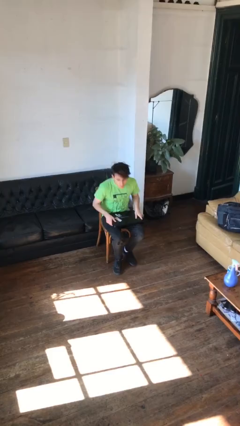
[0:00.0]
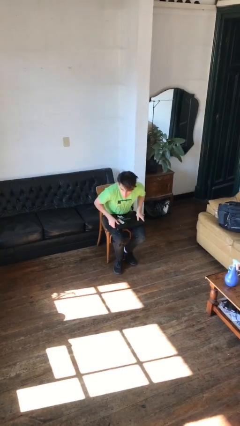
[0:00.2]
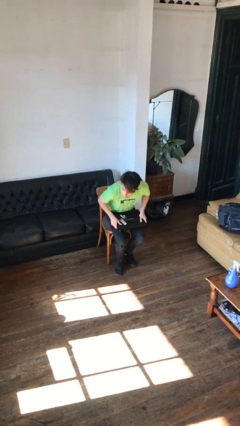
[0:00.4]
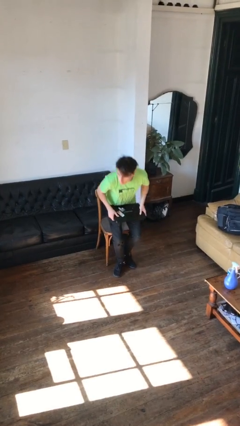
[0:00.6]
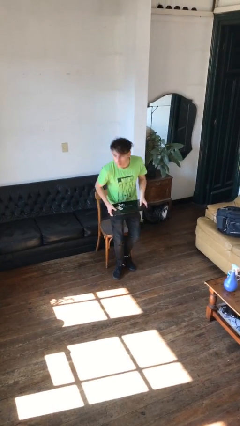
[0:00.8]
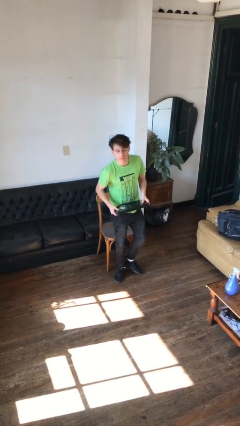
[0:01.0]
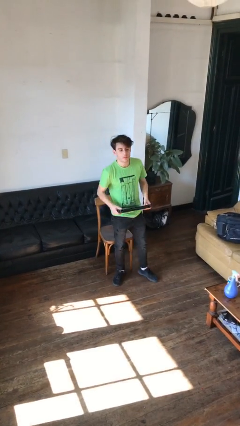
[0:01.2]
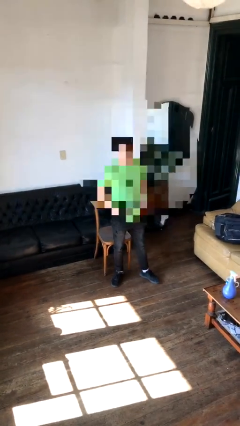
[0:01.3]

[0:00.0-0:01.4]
person stands up

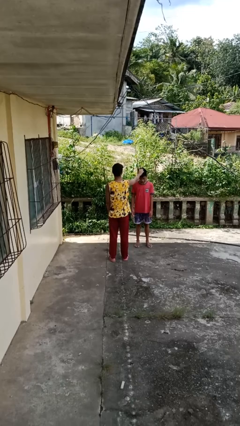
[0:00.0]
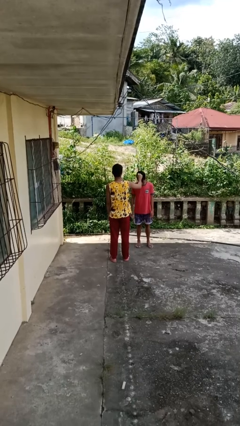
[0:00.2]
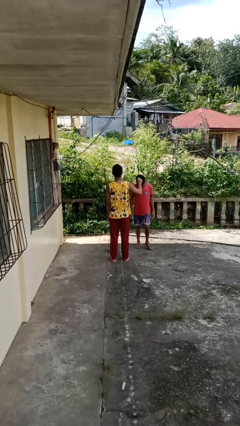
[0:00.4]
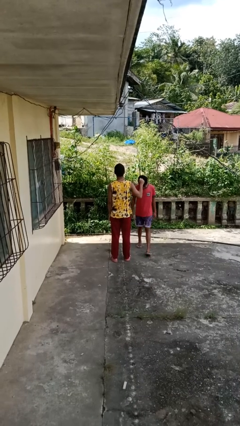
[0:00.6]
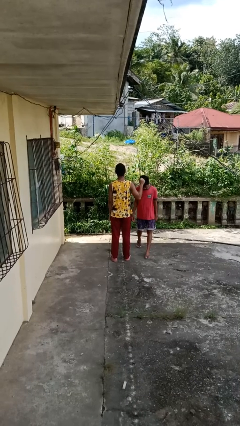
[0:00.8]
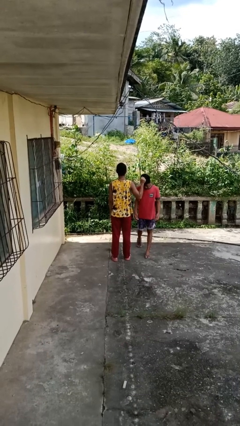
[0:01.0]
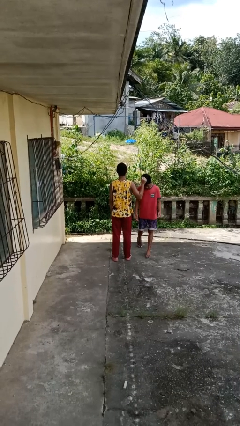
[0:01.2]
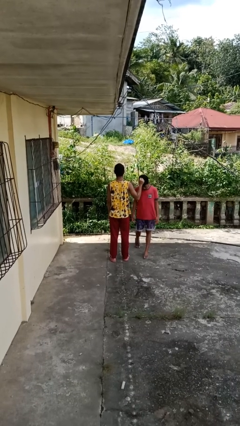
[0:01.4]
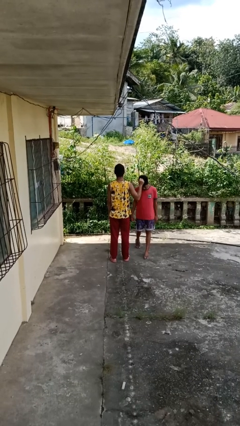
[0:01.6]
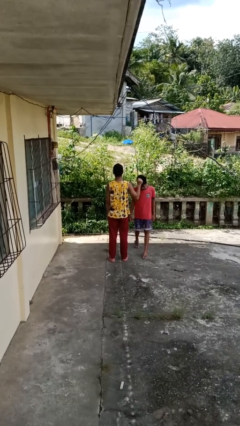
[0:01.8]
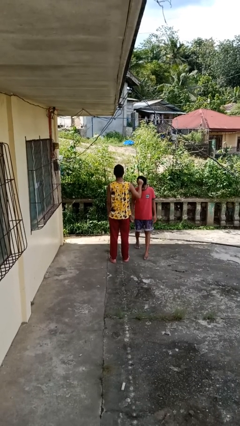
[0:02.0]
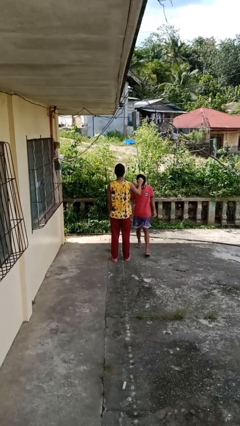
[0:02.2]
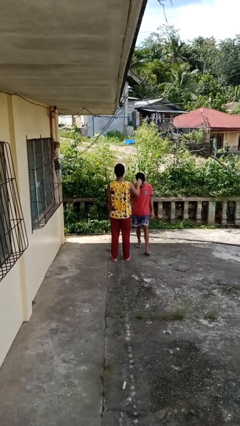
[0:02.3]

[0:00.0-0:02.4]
person grabs person by hair

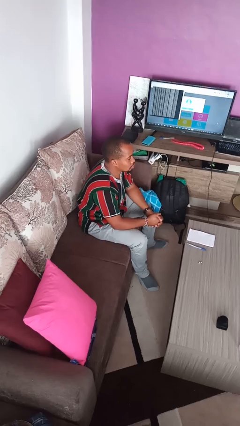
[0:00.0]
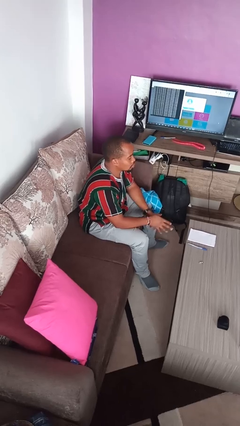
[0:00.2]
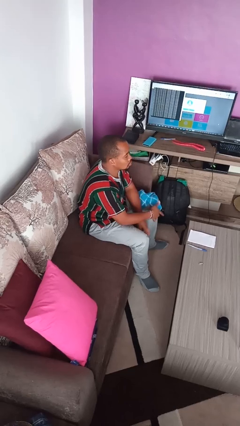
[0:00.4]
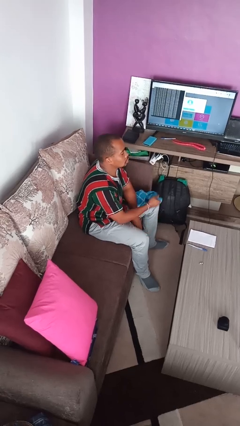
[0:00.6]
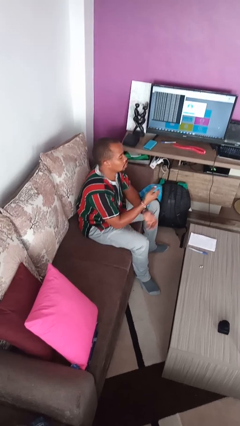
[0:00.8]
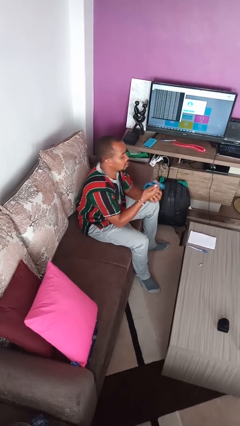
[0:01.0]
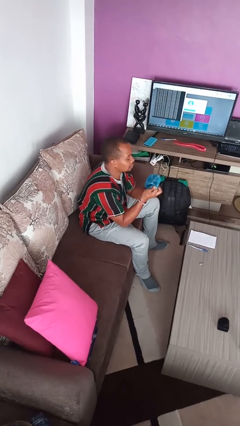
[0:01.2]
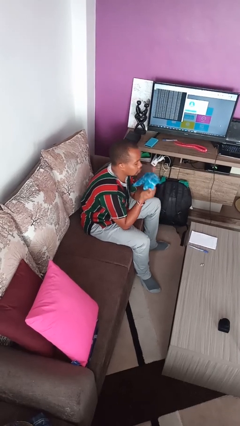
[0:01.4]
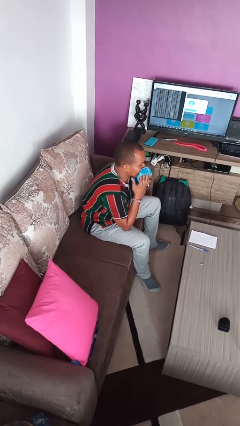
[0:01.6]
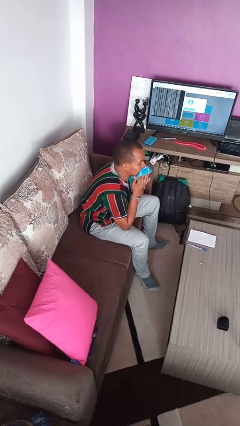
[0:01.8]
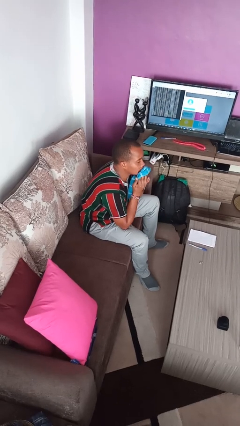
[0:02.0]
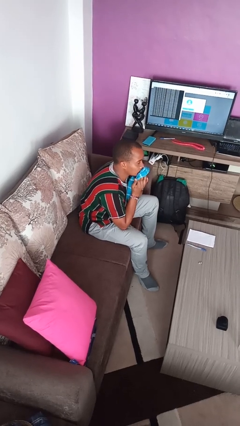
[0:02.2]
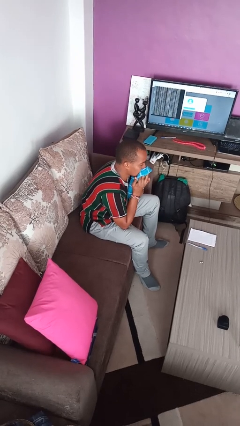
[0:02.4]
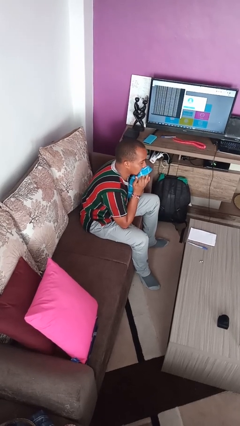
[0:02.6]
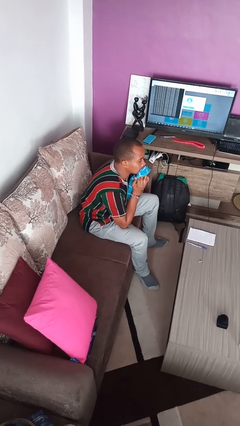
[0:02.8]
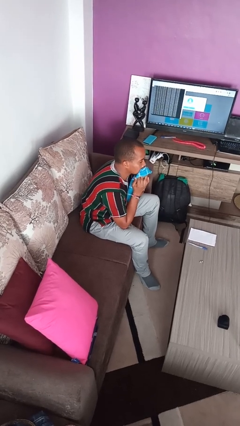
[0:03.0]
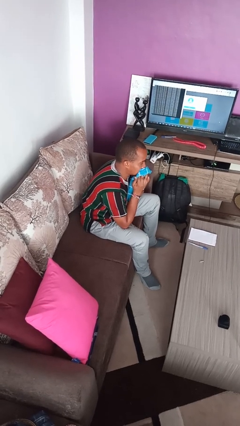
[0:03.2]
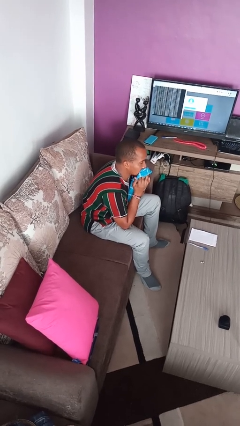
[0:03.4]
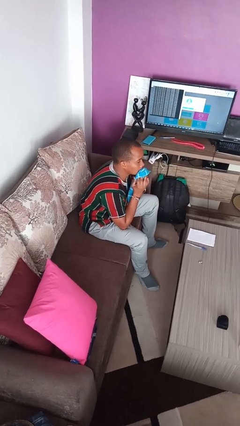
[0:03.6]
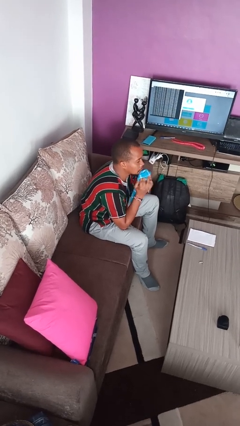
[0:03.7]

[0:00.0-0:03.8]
person wipes mouth with napkin

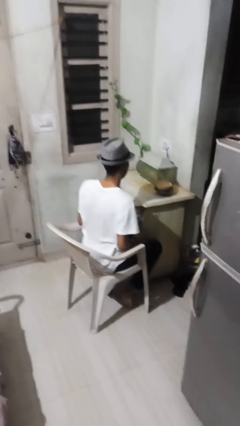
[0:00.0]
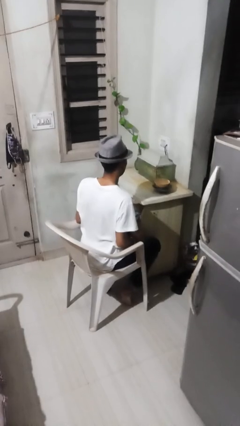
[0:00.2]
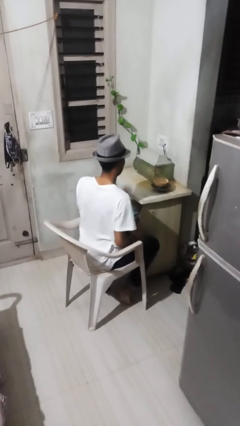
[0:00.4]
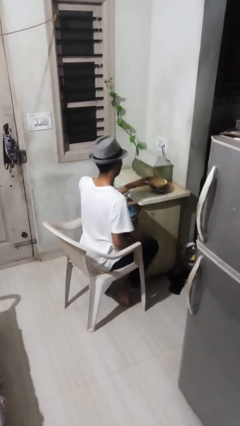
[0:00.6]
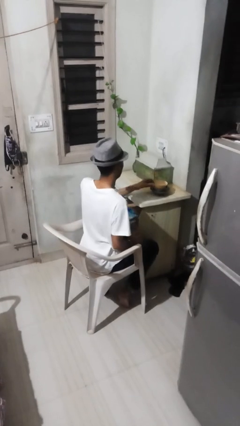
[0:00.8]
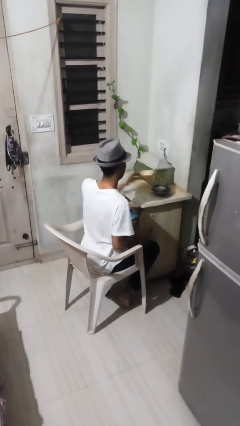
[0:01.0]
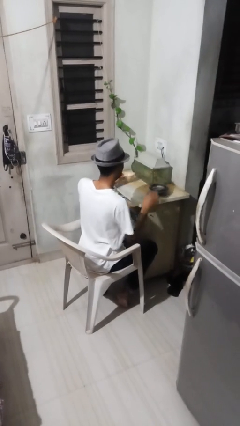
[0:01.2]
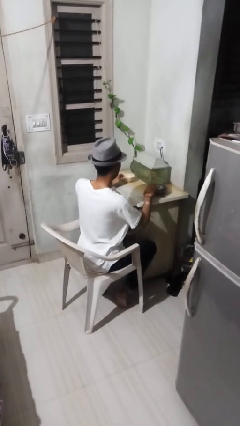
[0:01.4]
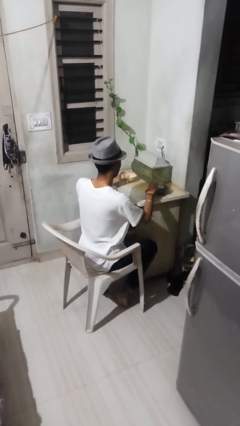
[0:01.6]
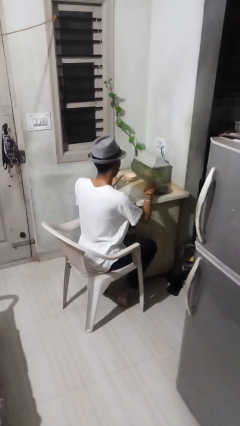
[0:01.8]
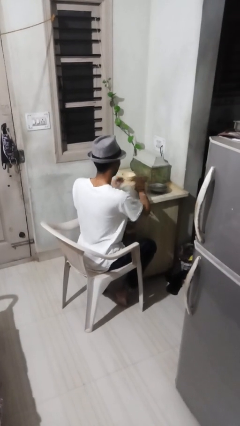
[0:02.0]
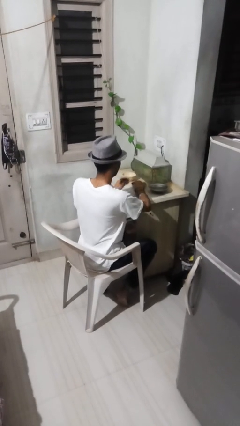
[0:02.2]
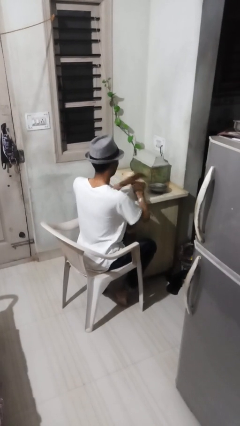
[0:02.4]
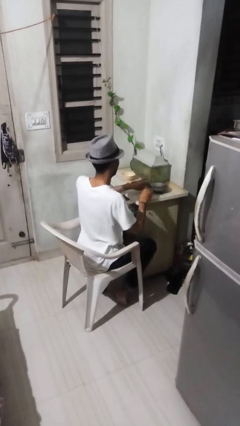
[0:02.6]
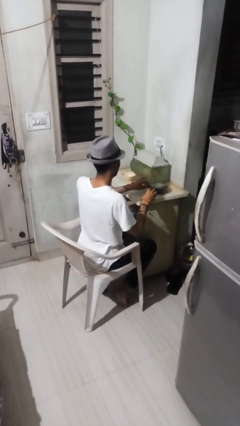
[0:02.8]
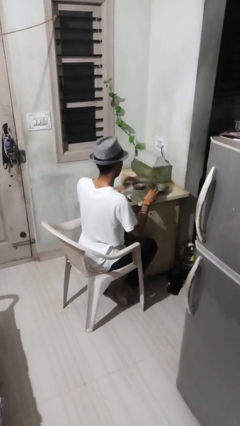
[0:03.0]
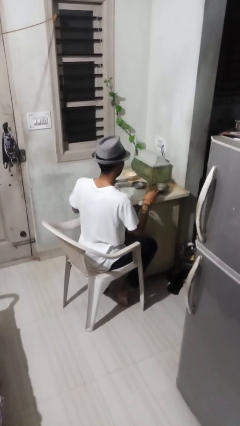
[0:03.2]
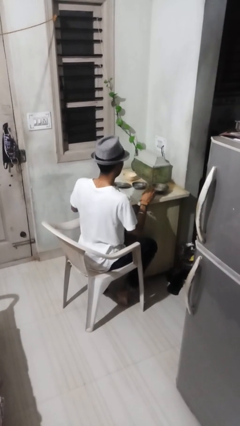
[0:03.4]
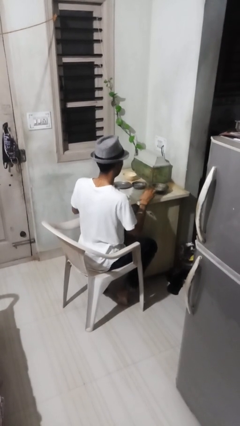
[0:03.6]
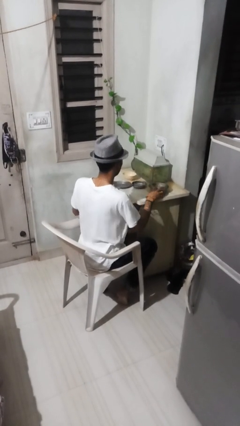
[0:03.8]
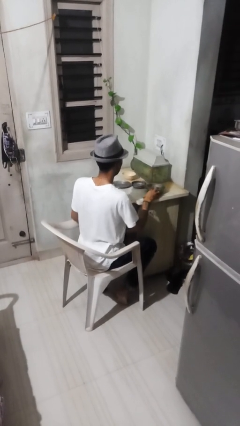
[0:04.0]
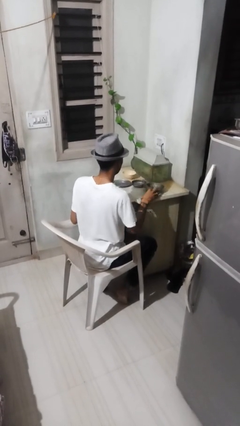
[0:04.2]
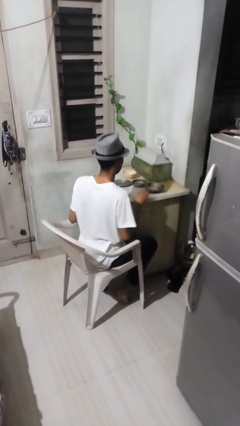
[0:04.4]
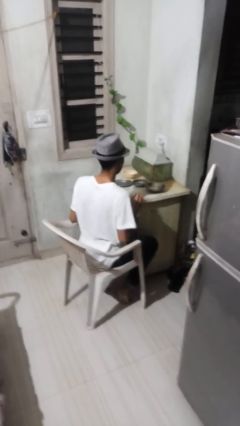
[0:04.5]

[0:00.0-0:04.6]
person sets table

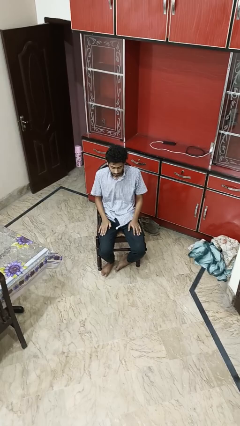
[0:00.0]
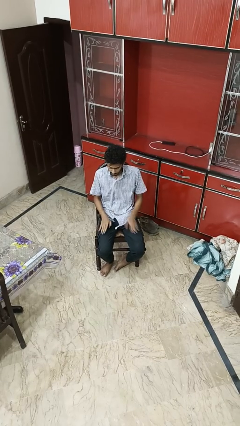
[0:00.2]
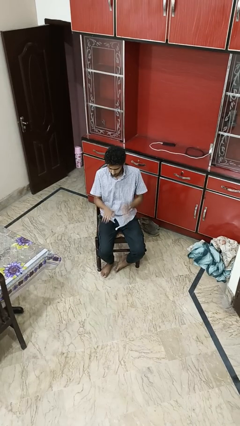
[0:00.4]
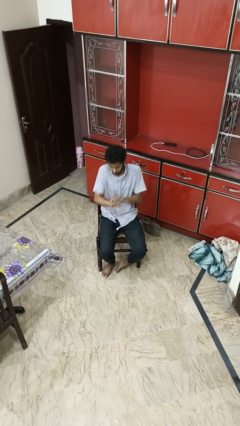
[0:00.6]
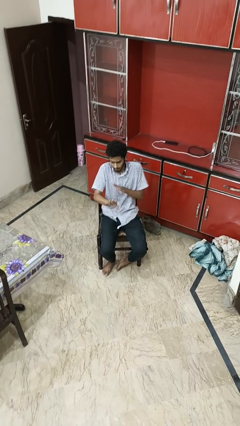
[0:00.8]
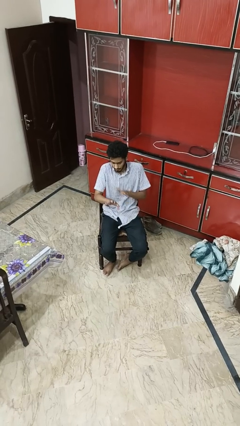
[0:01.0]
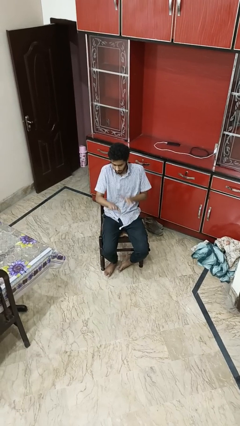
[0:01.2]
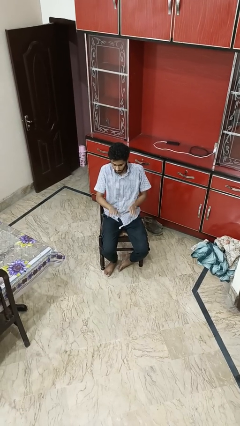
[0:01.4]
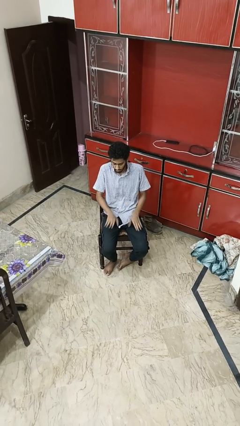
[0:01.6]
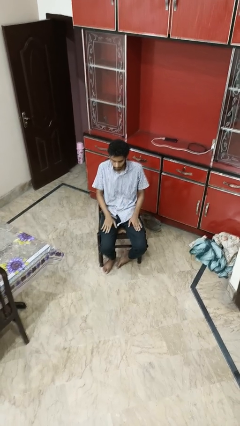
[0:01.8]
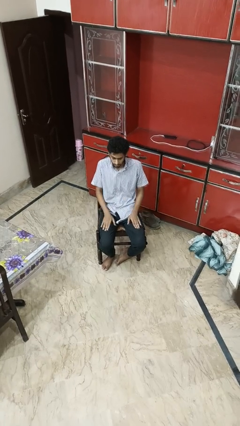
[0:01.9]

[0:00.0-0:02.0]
person swats bug

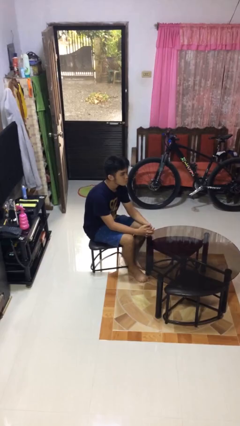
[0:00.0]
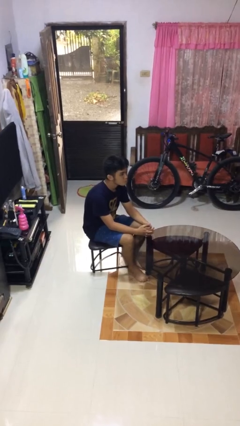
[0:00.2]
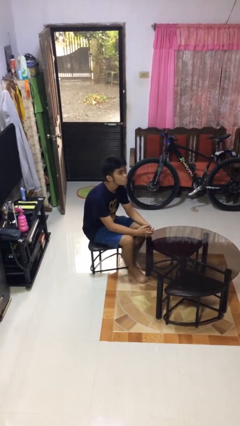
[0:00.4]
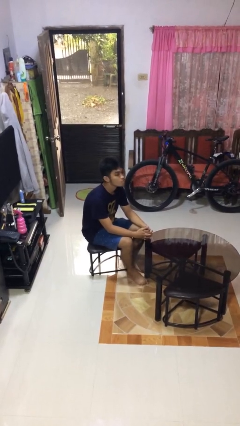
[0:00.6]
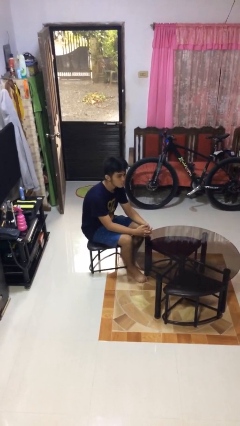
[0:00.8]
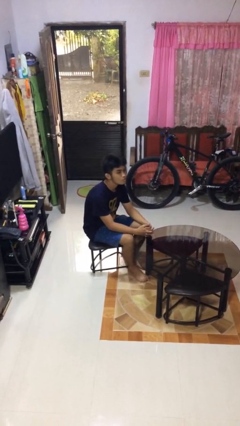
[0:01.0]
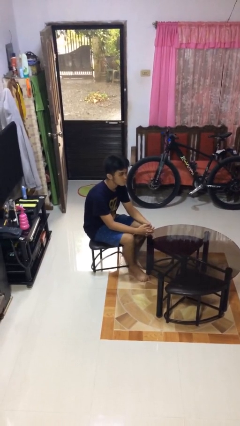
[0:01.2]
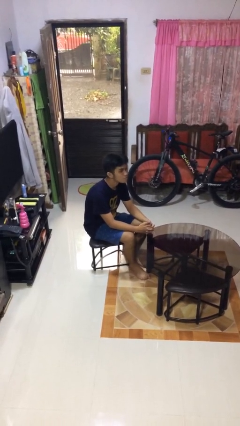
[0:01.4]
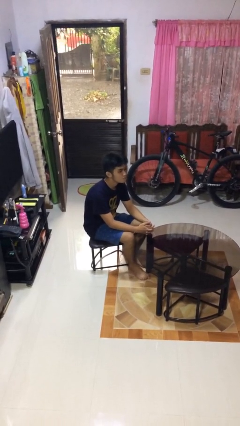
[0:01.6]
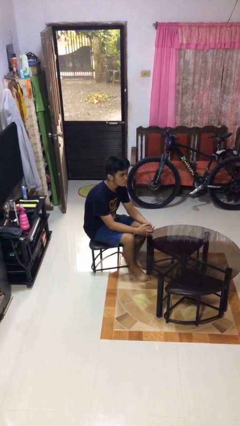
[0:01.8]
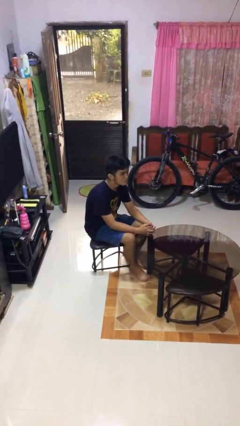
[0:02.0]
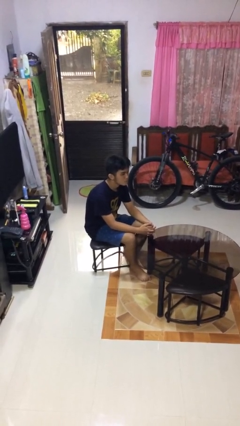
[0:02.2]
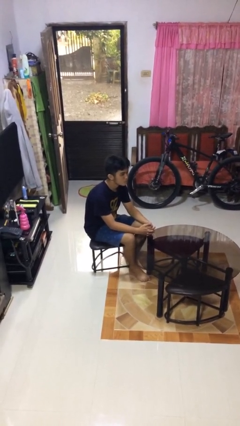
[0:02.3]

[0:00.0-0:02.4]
person nods head

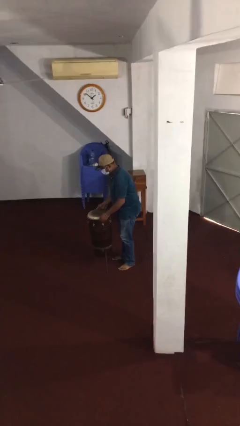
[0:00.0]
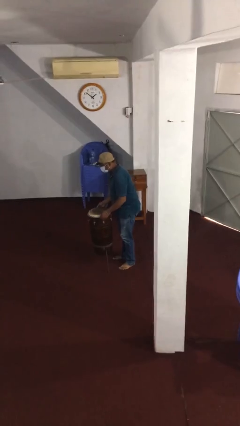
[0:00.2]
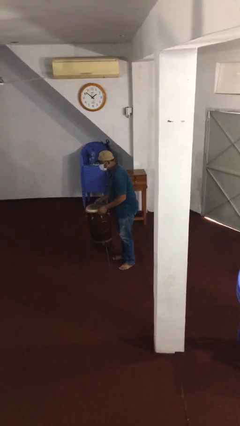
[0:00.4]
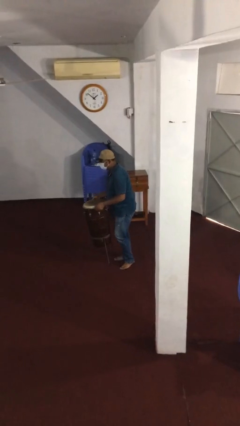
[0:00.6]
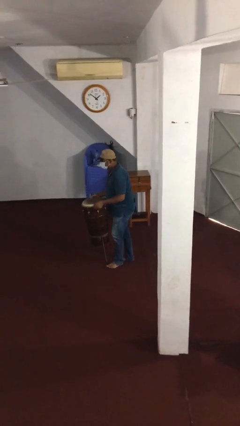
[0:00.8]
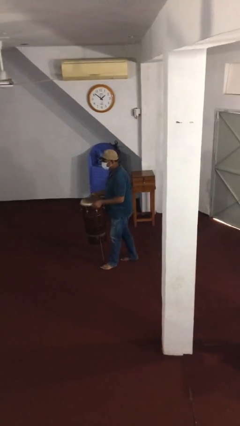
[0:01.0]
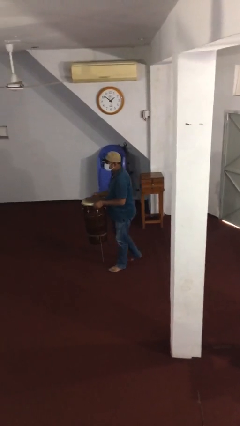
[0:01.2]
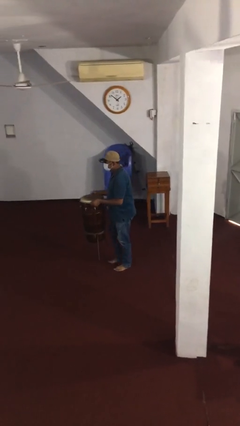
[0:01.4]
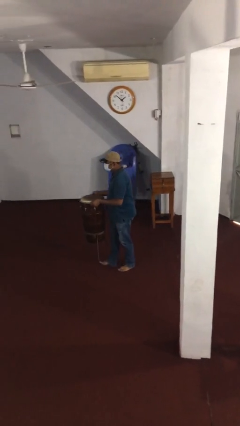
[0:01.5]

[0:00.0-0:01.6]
person picks up object from floor
